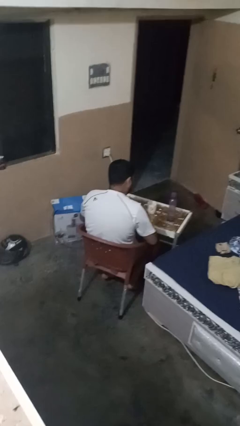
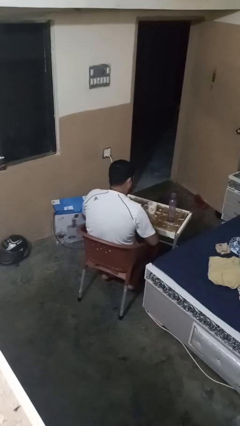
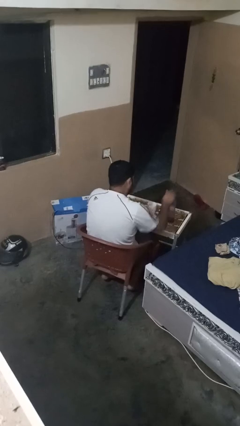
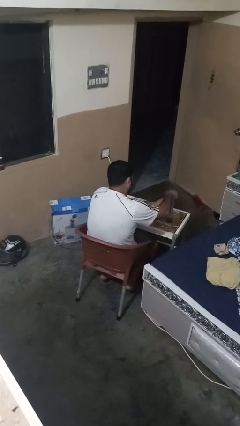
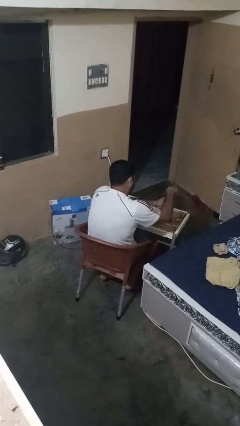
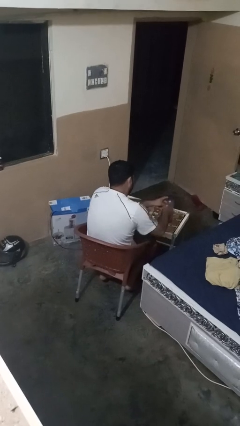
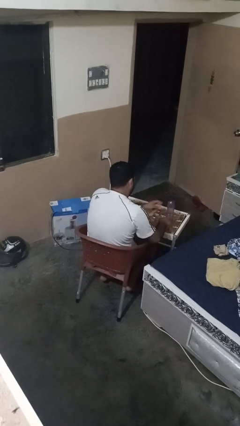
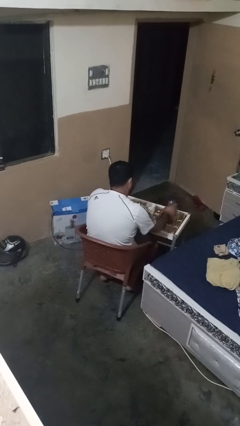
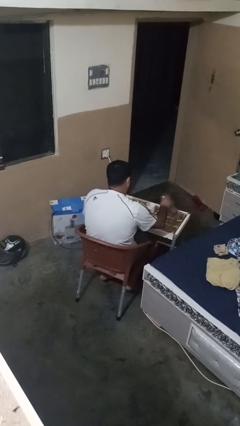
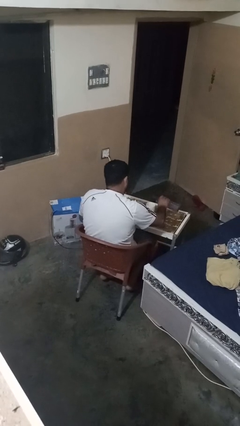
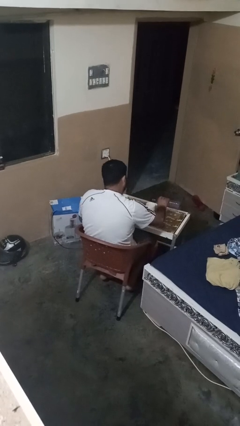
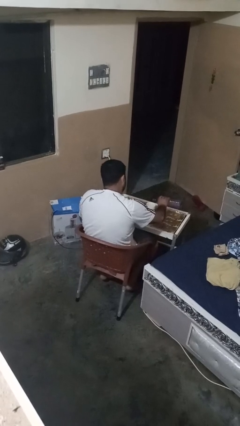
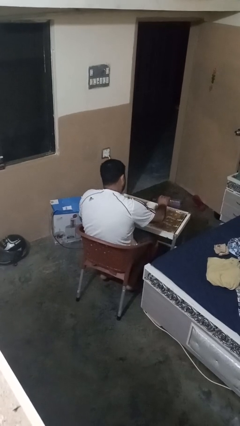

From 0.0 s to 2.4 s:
person unscrews lid from bottle

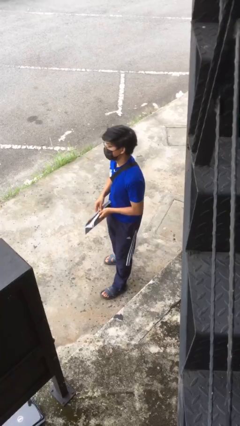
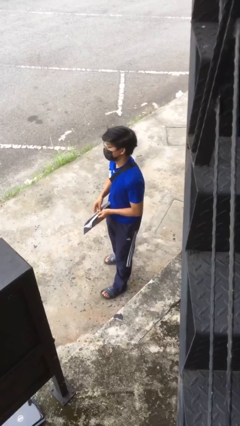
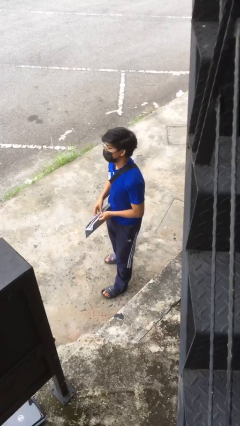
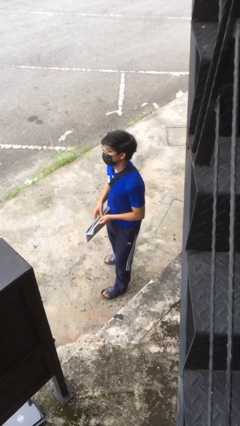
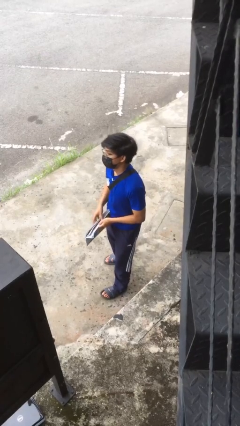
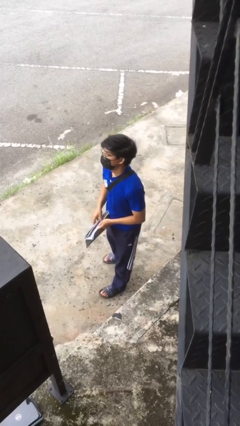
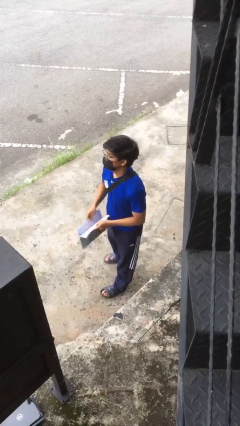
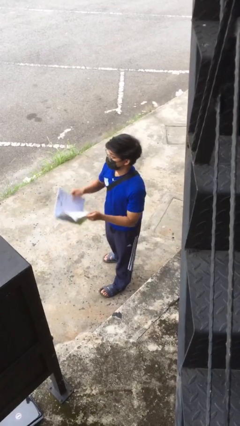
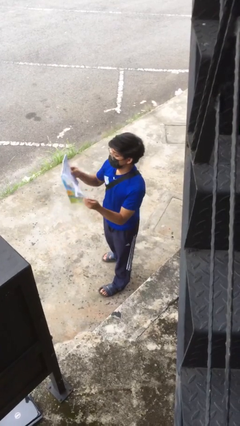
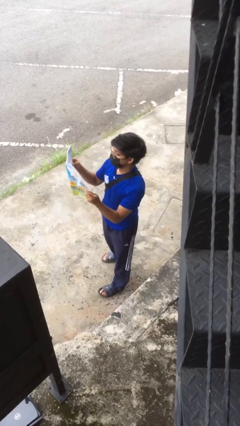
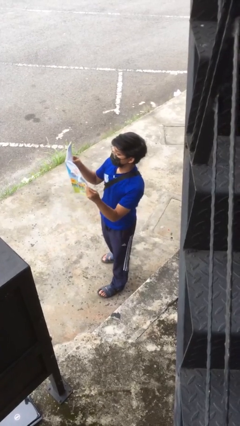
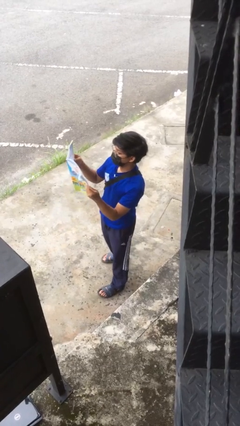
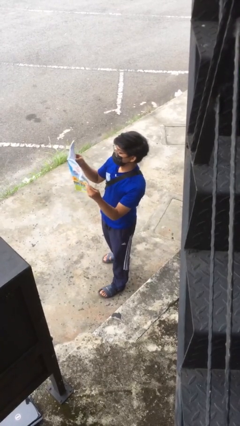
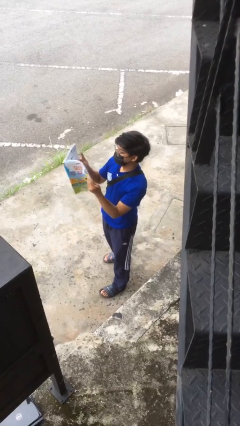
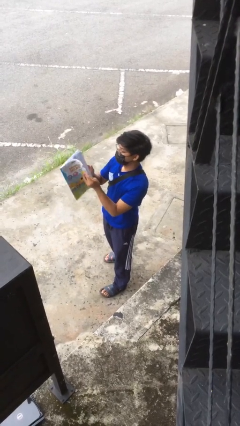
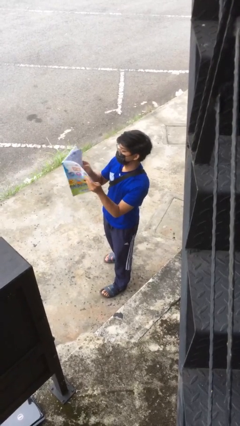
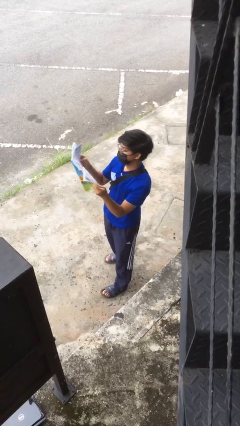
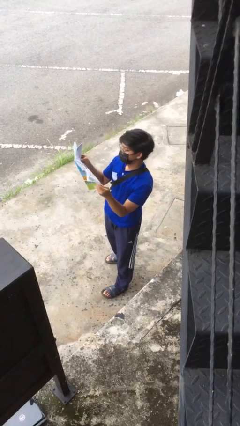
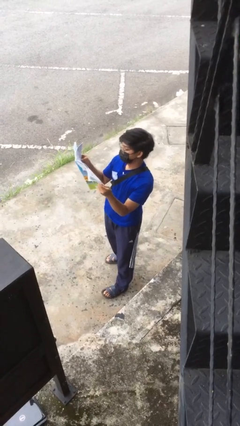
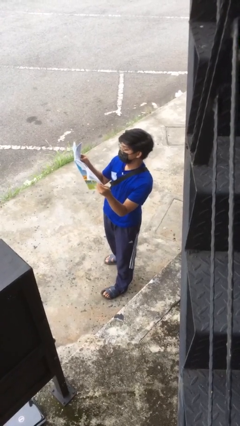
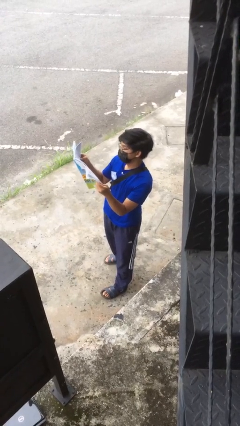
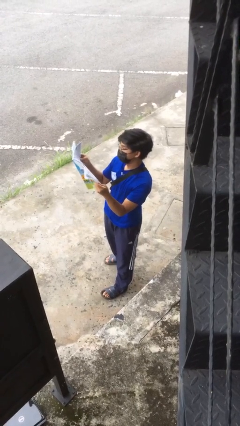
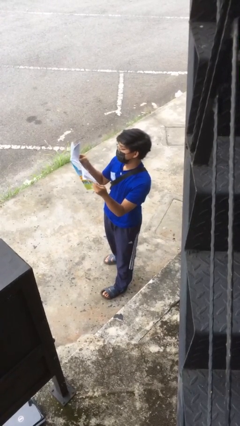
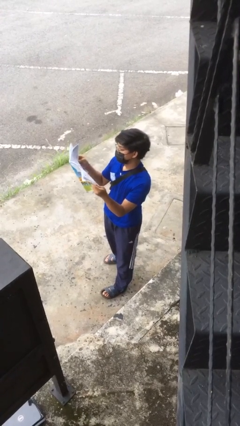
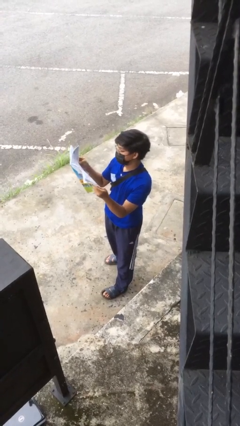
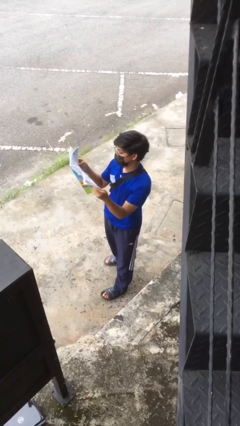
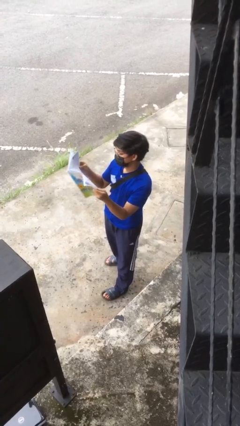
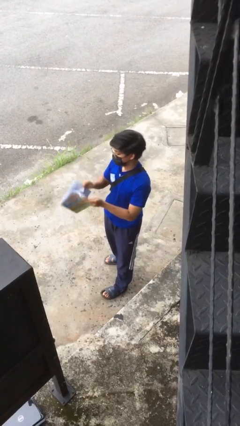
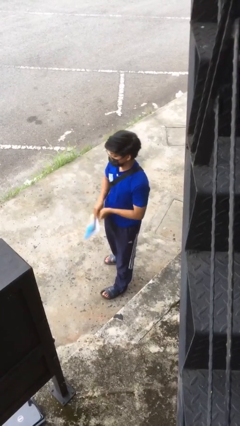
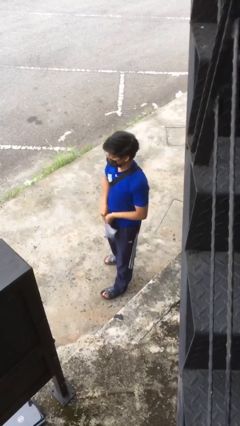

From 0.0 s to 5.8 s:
person reads document

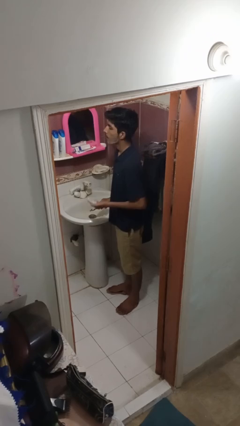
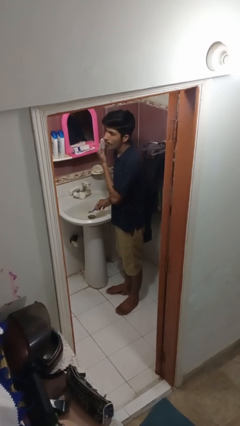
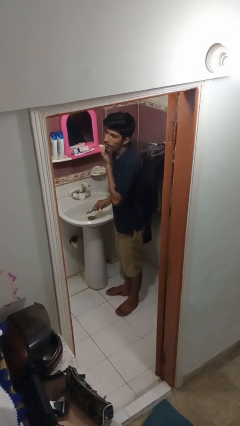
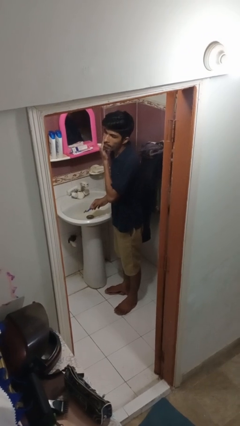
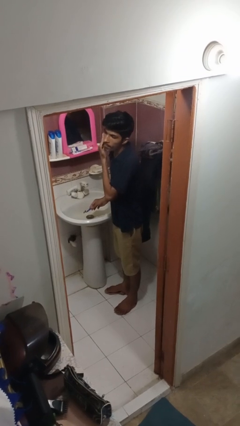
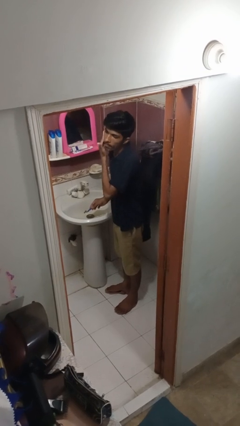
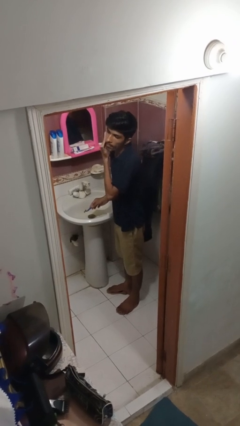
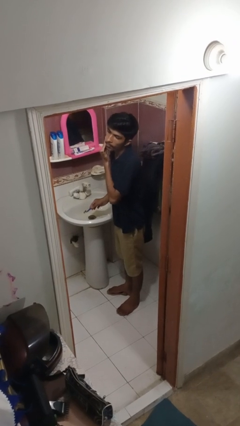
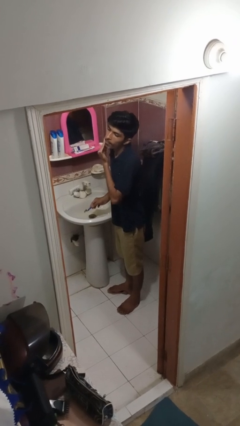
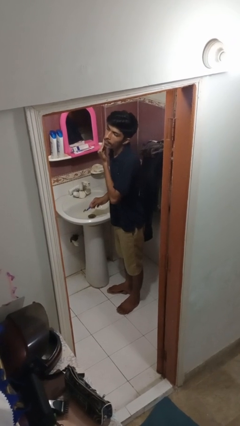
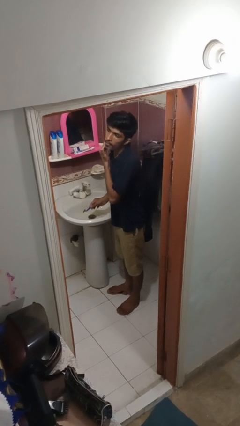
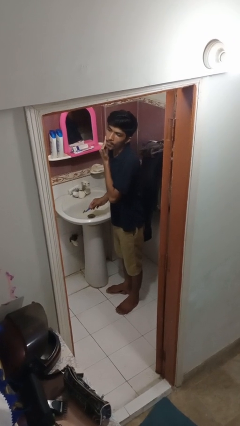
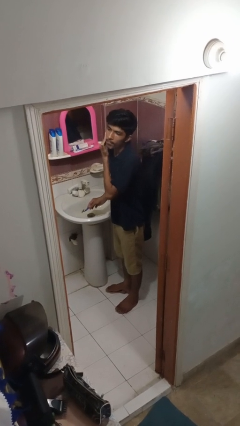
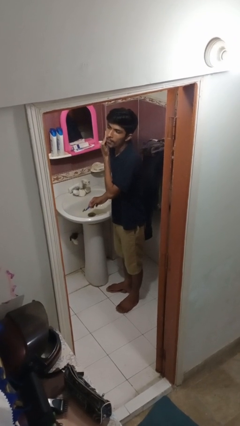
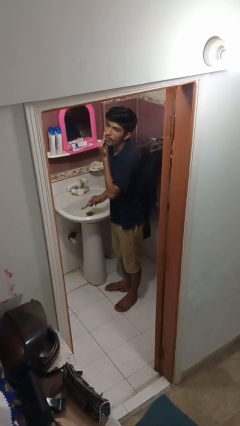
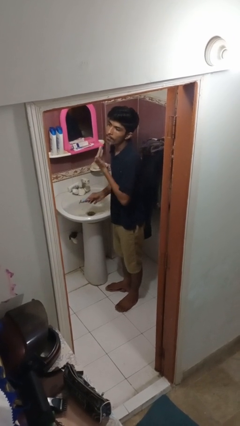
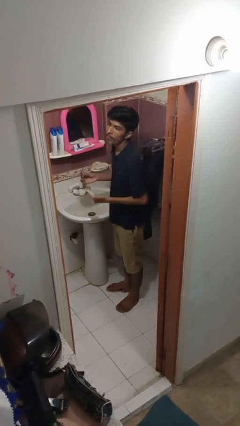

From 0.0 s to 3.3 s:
person applies shaving cream

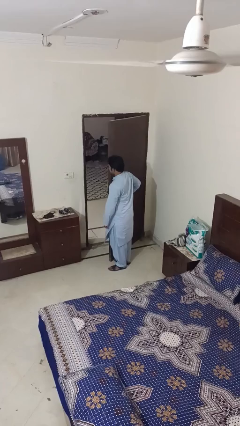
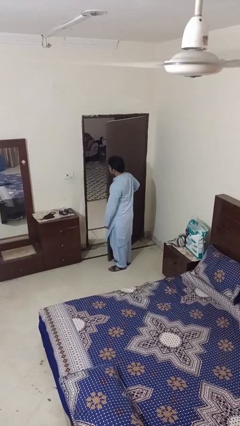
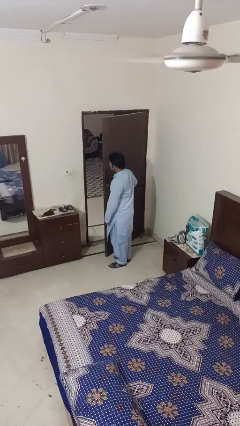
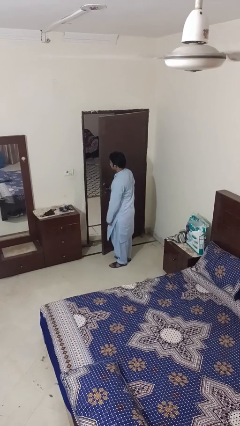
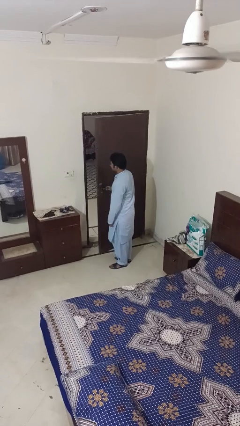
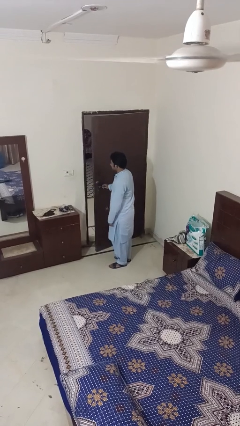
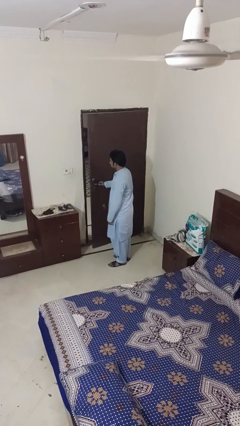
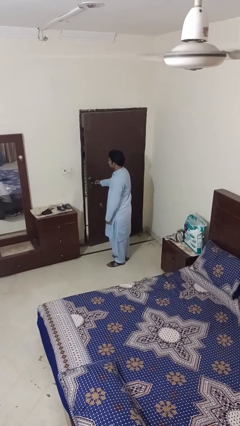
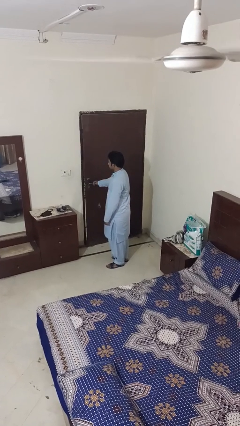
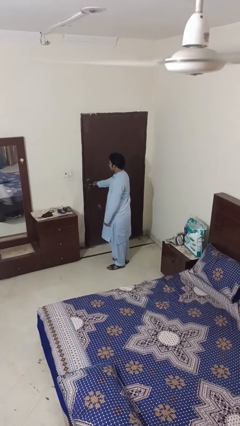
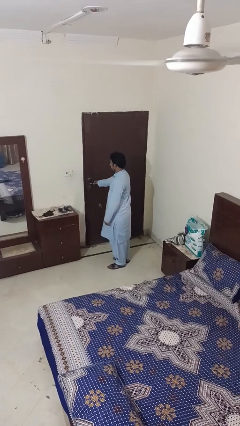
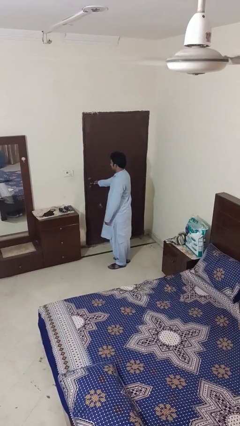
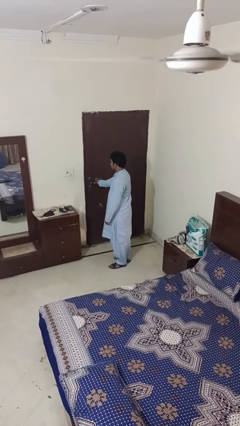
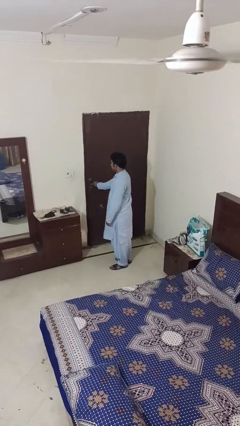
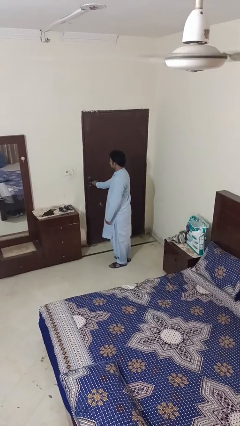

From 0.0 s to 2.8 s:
person closes facility door

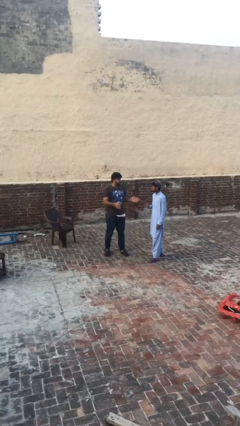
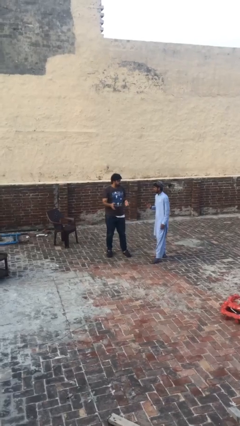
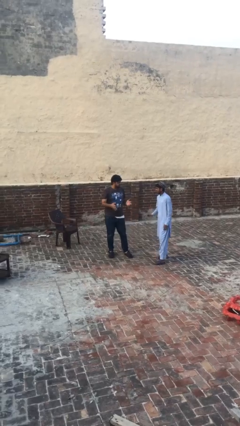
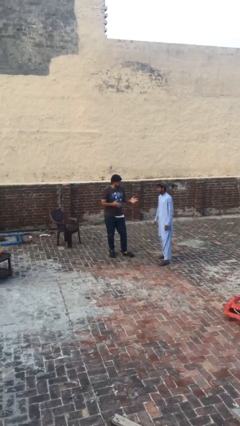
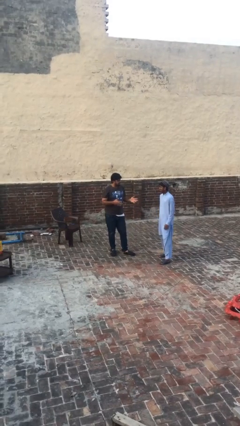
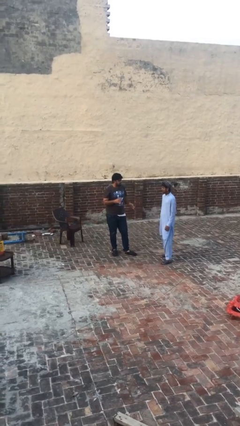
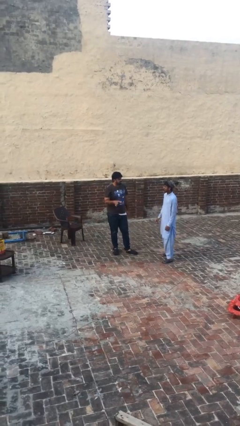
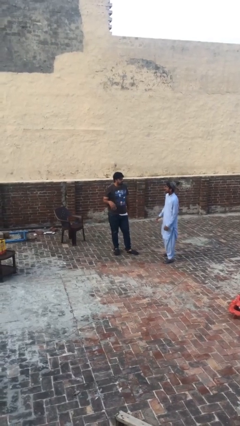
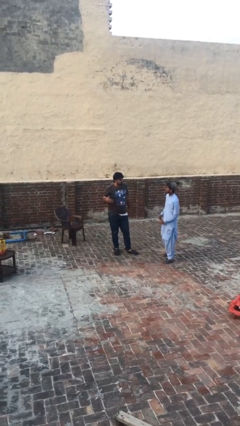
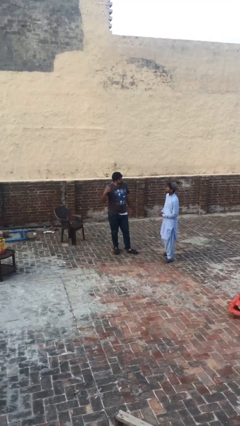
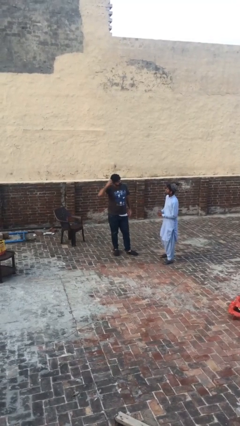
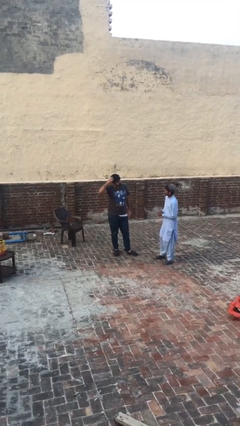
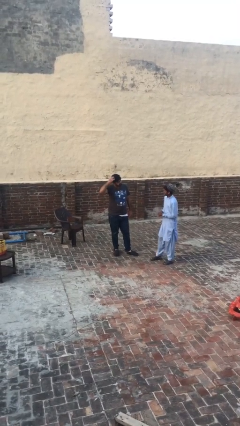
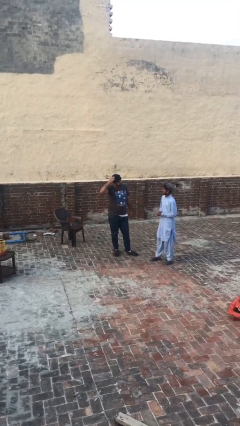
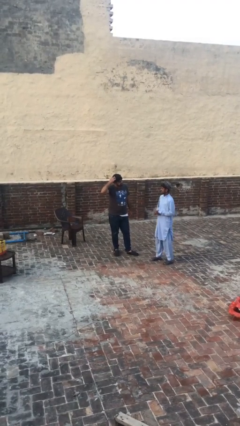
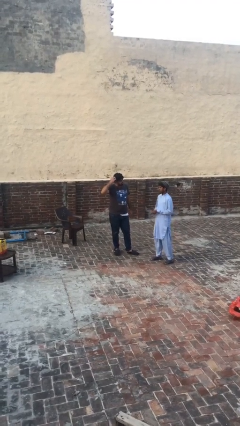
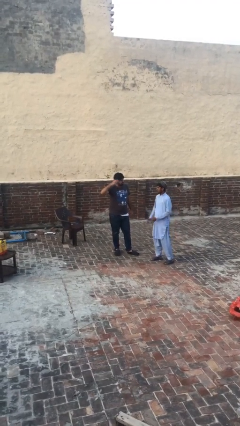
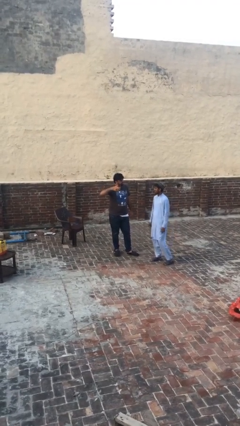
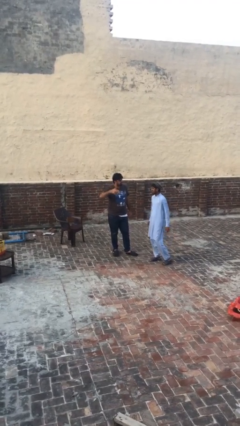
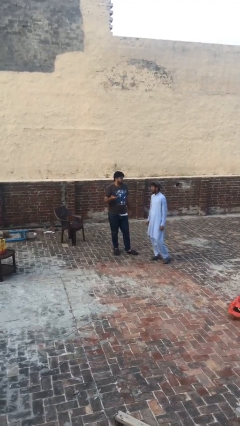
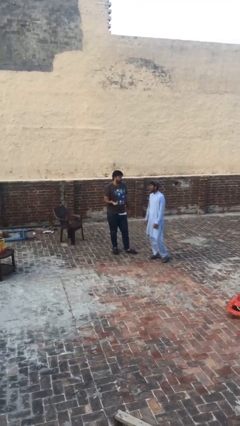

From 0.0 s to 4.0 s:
person talks to person
